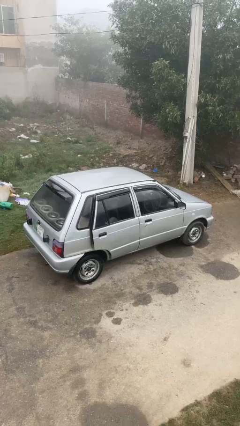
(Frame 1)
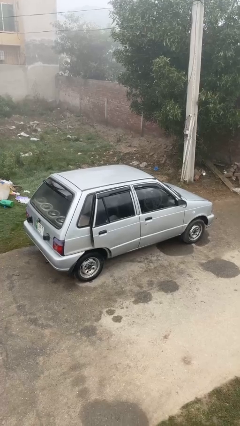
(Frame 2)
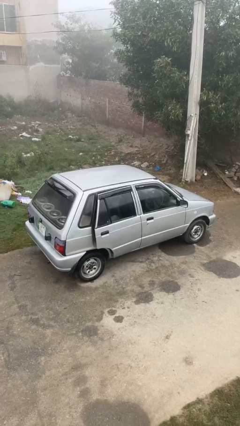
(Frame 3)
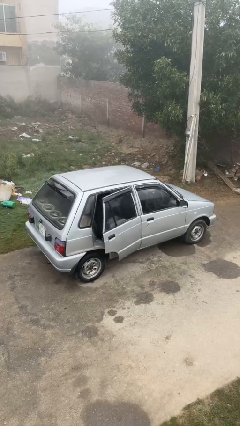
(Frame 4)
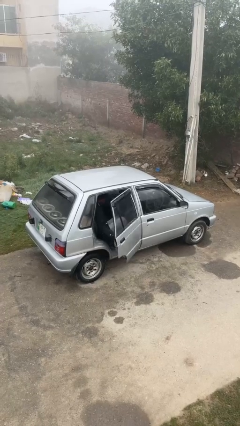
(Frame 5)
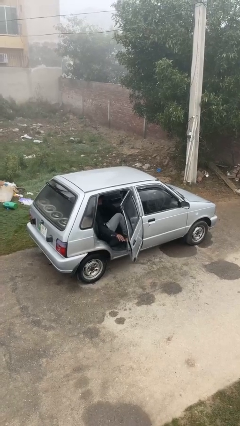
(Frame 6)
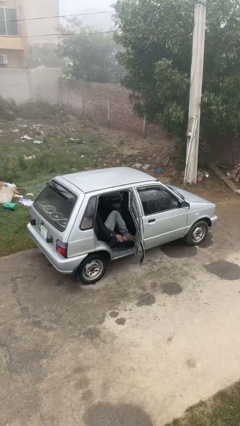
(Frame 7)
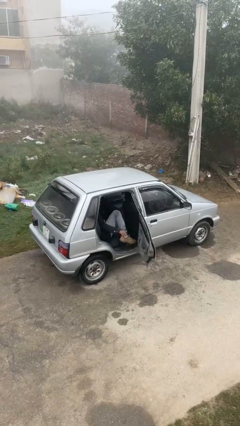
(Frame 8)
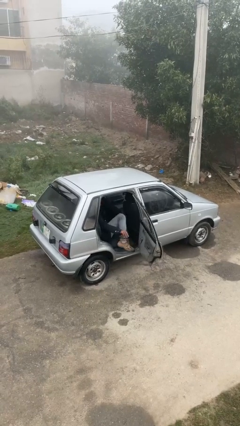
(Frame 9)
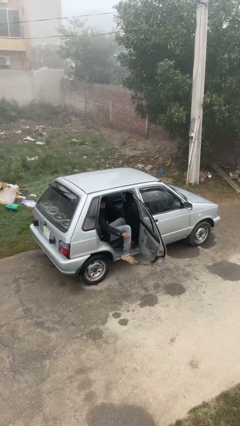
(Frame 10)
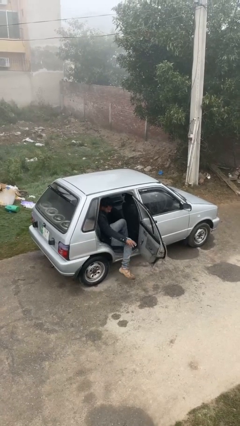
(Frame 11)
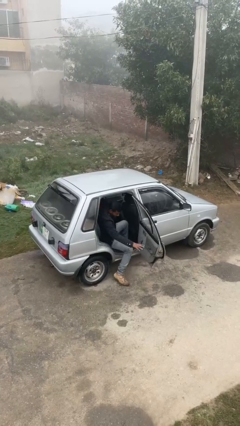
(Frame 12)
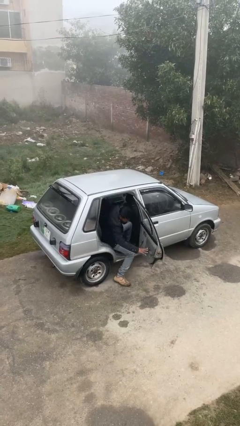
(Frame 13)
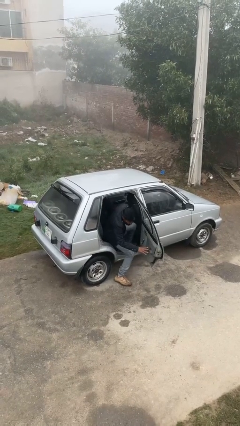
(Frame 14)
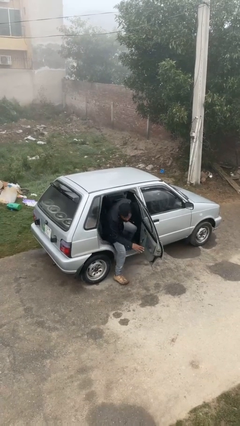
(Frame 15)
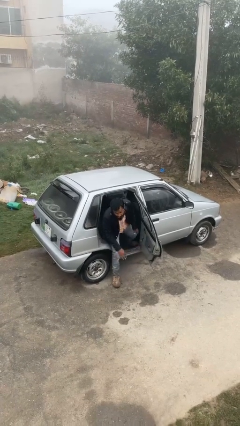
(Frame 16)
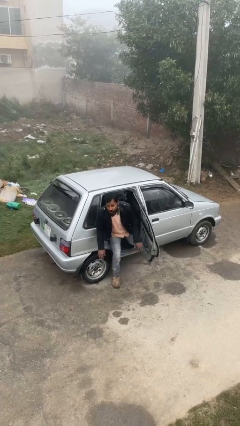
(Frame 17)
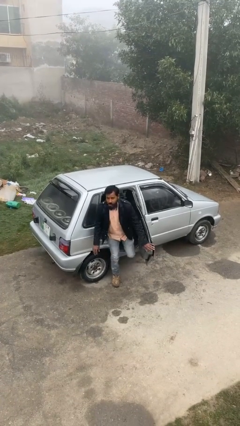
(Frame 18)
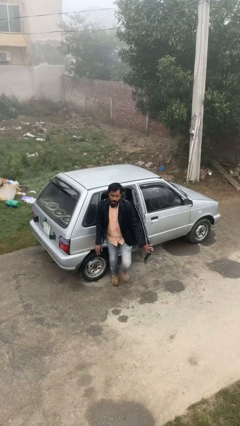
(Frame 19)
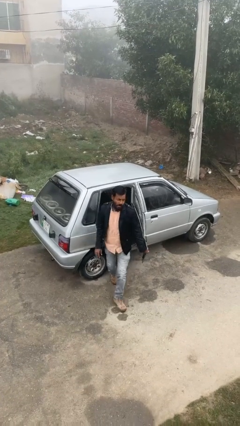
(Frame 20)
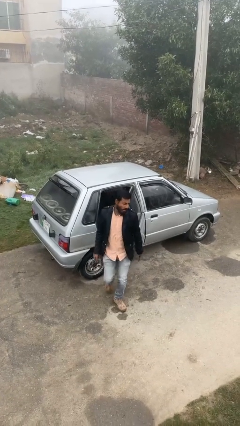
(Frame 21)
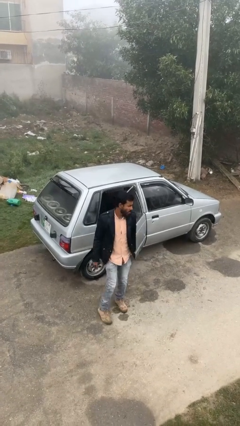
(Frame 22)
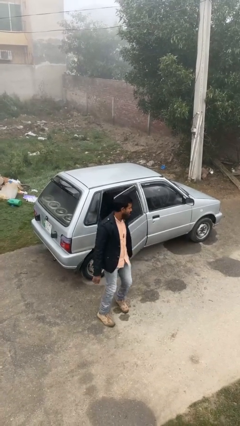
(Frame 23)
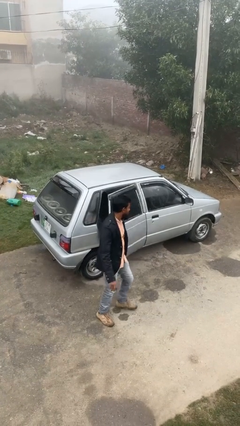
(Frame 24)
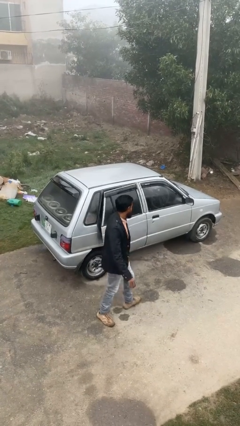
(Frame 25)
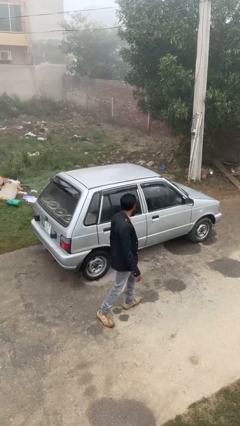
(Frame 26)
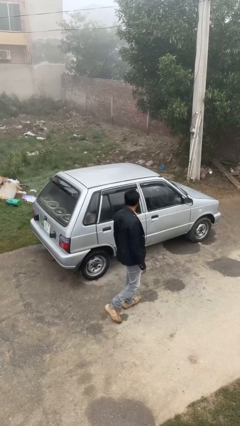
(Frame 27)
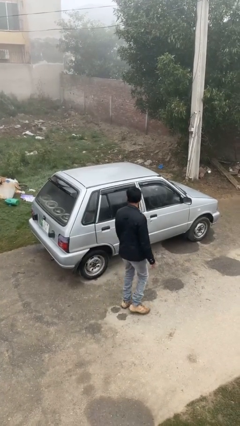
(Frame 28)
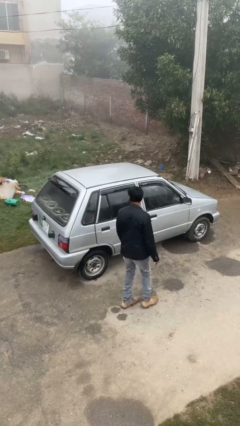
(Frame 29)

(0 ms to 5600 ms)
car drops off person

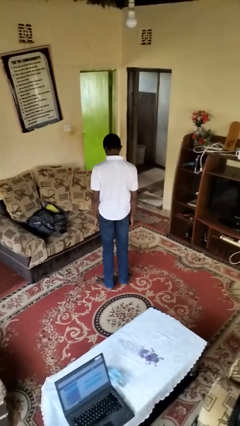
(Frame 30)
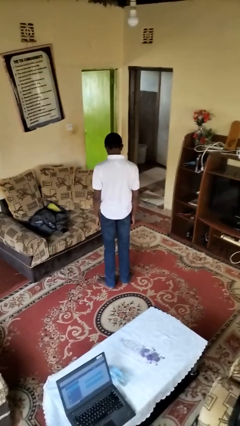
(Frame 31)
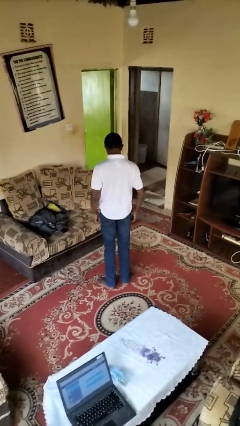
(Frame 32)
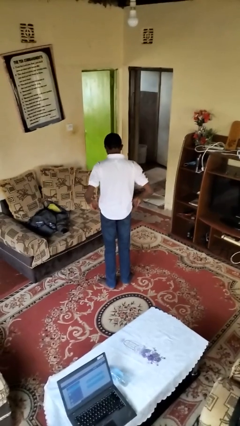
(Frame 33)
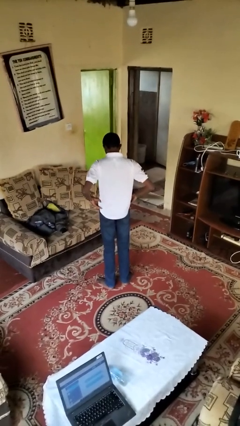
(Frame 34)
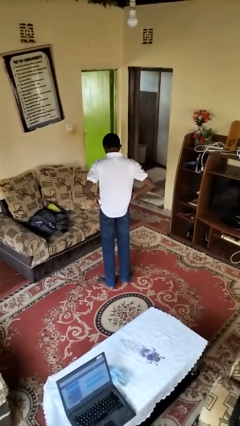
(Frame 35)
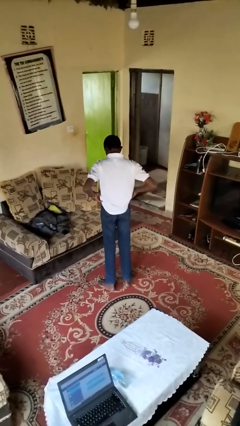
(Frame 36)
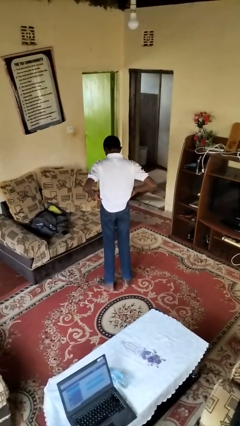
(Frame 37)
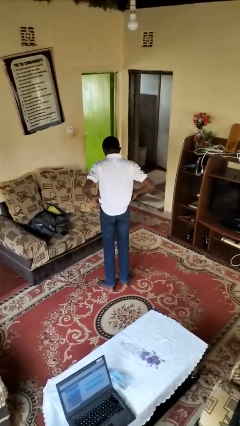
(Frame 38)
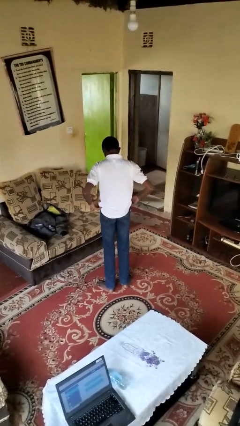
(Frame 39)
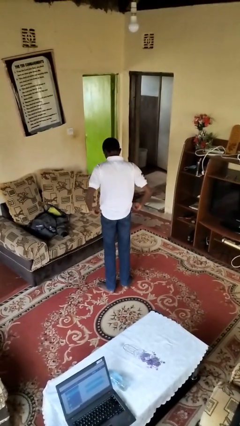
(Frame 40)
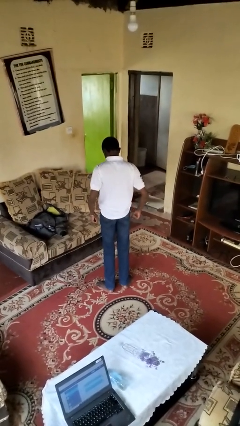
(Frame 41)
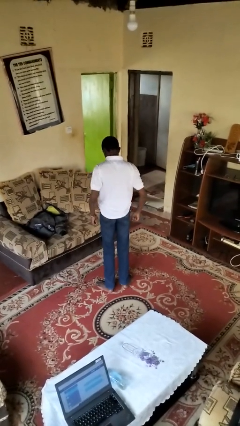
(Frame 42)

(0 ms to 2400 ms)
person hikes up pants

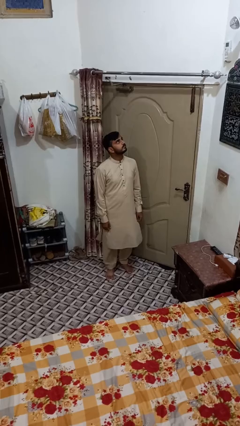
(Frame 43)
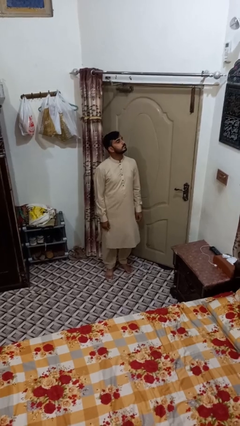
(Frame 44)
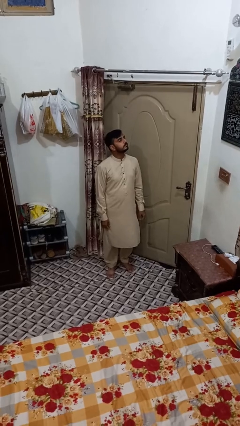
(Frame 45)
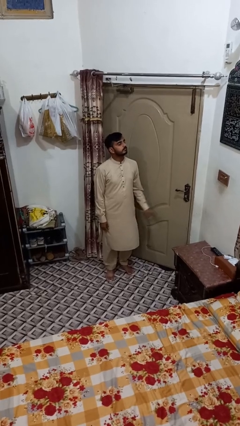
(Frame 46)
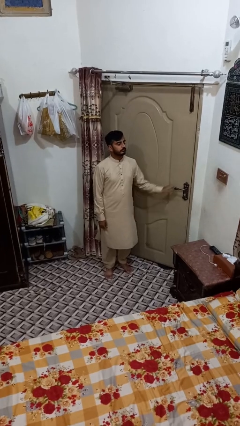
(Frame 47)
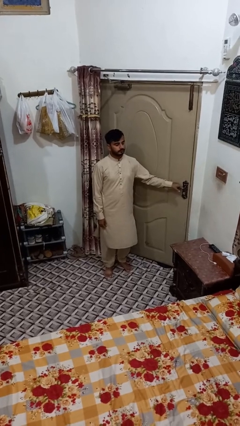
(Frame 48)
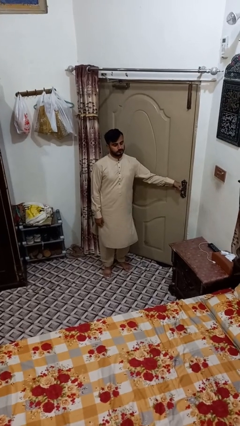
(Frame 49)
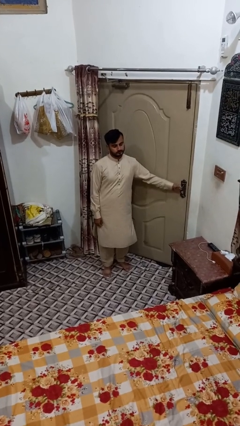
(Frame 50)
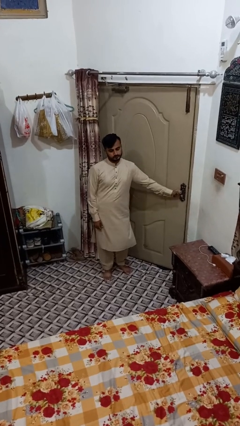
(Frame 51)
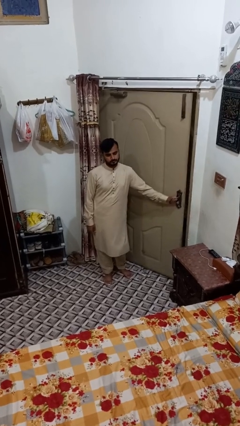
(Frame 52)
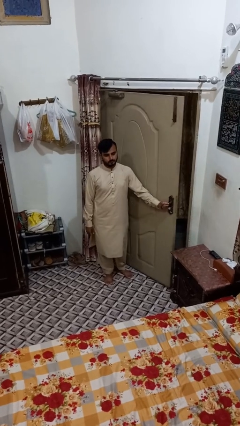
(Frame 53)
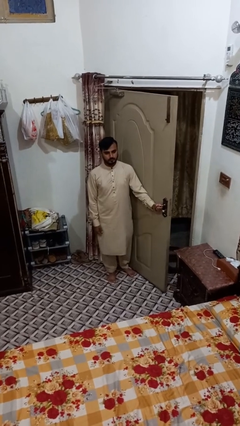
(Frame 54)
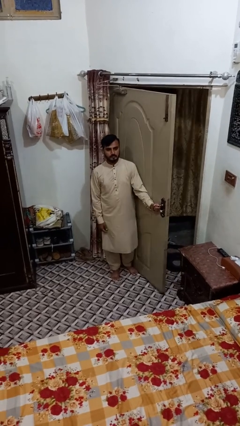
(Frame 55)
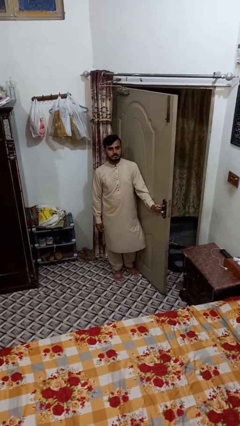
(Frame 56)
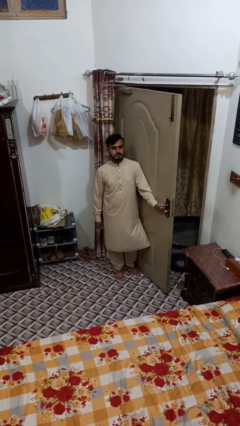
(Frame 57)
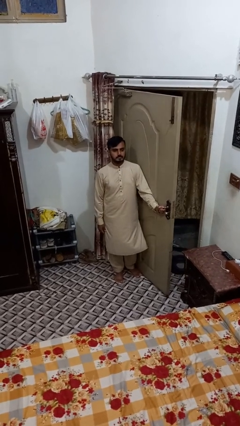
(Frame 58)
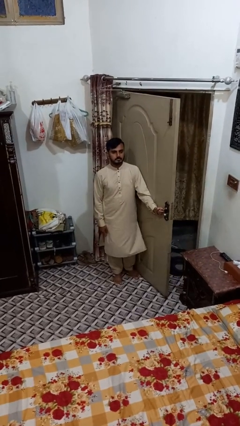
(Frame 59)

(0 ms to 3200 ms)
person opens closet door

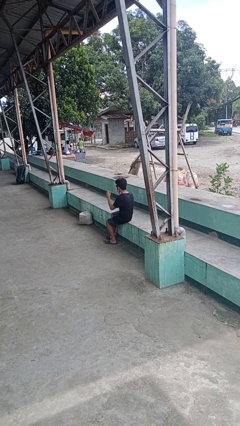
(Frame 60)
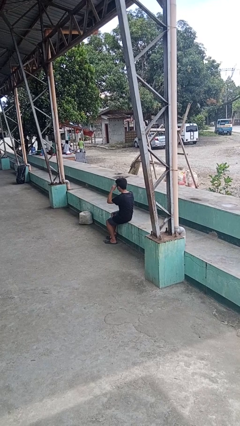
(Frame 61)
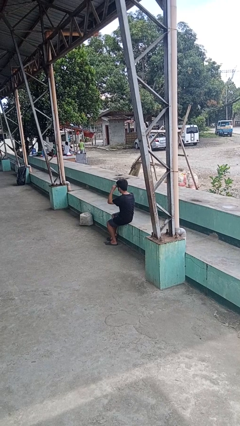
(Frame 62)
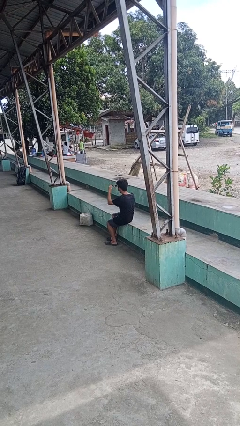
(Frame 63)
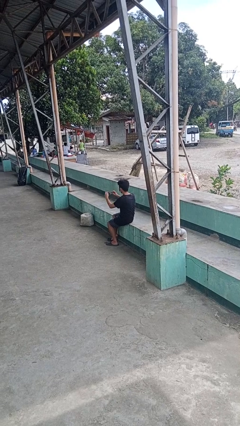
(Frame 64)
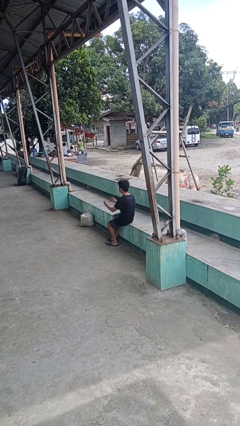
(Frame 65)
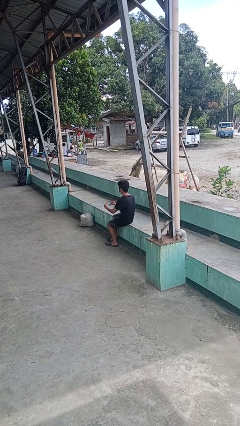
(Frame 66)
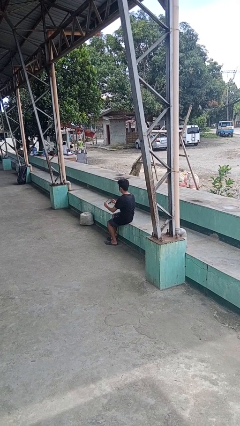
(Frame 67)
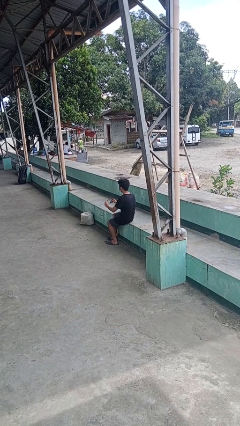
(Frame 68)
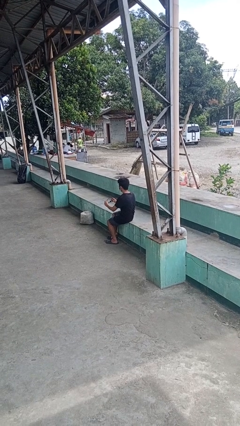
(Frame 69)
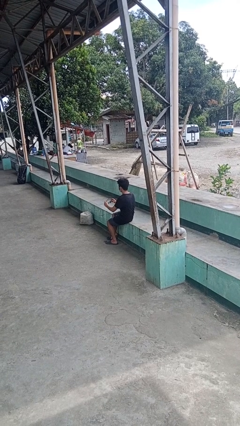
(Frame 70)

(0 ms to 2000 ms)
person takes off sunglasses

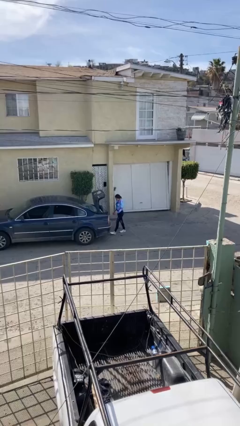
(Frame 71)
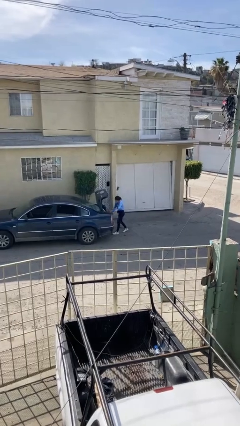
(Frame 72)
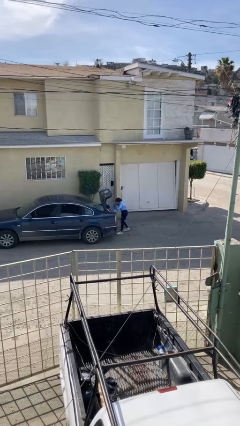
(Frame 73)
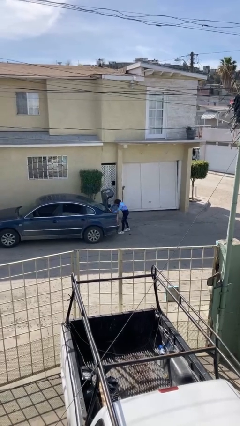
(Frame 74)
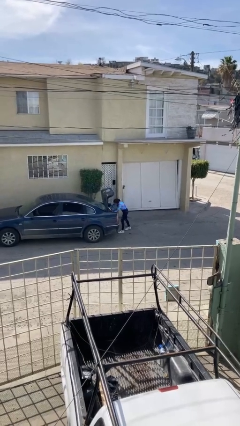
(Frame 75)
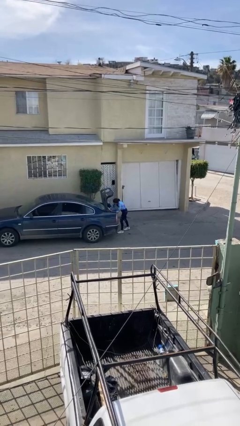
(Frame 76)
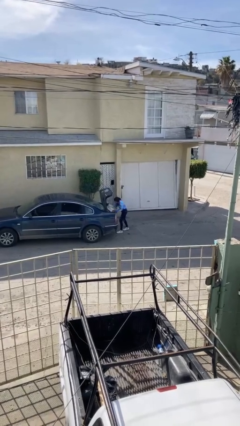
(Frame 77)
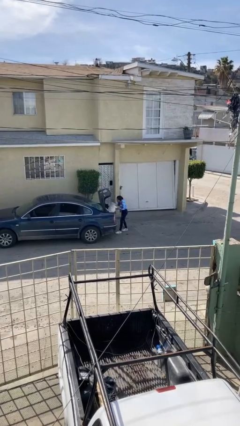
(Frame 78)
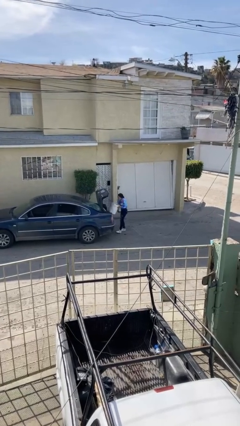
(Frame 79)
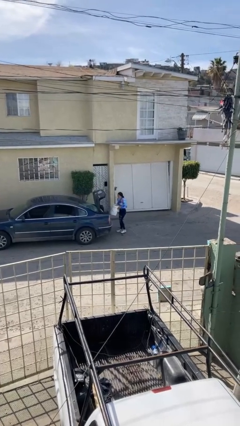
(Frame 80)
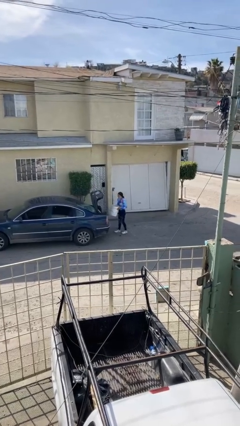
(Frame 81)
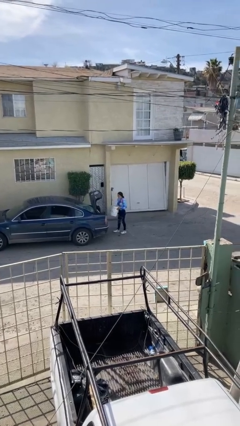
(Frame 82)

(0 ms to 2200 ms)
person unloads car

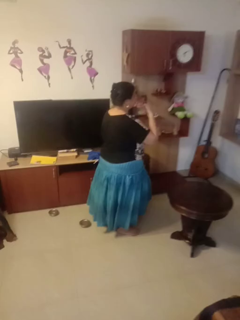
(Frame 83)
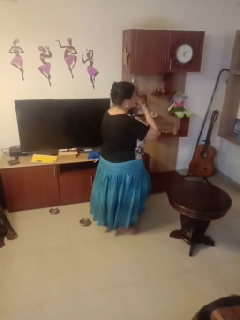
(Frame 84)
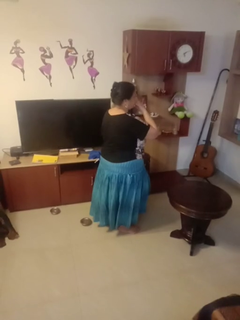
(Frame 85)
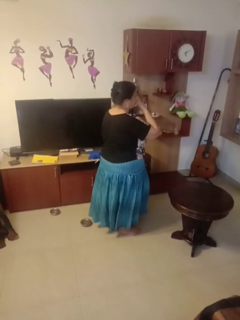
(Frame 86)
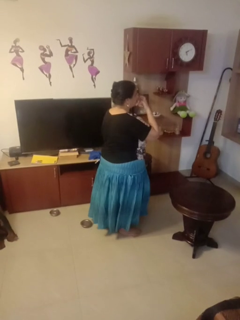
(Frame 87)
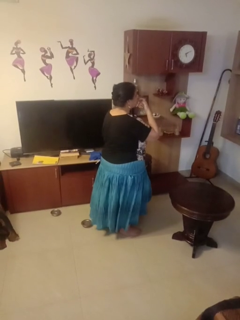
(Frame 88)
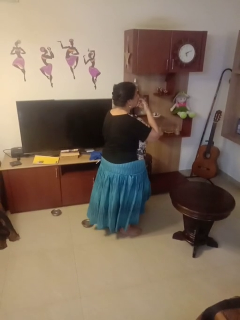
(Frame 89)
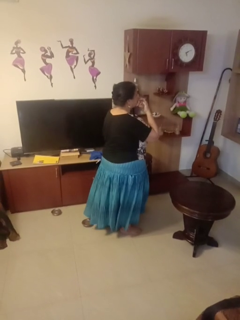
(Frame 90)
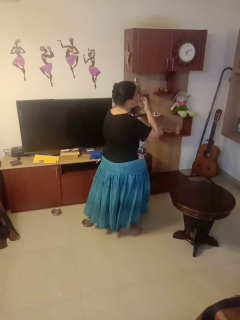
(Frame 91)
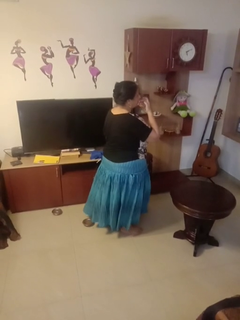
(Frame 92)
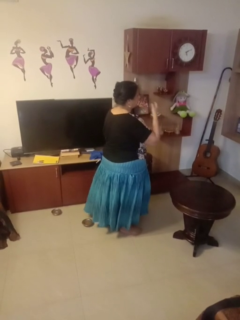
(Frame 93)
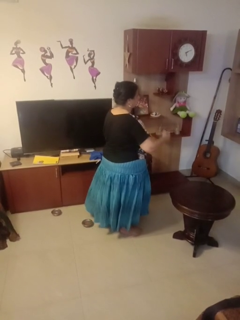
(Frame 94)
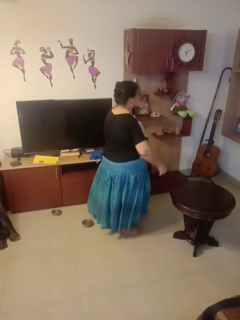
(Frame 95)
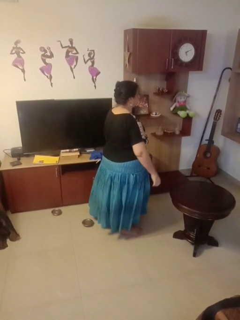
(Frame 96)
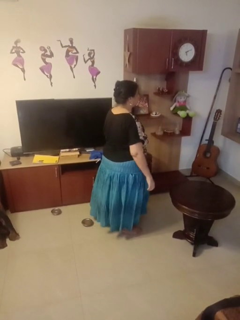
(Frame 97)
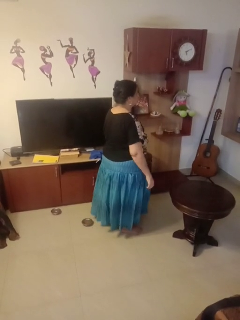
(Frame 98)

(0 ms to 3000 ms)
person licks fingers
